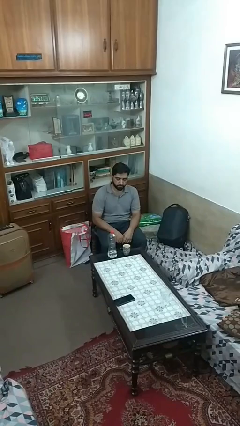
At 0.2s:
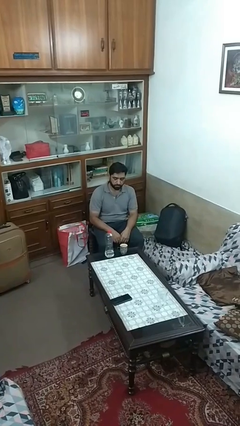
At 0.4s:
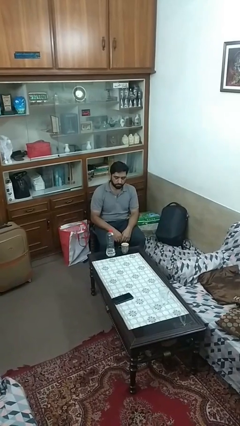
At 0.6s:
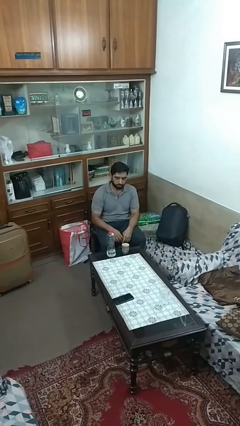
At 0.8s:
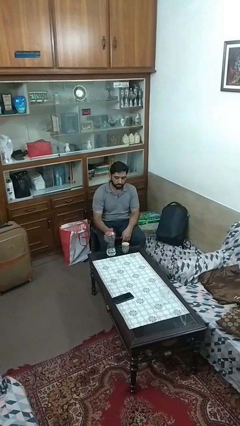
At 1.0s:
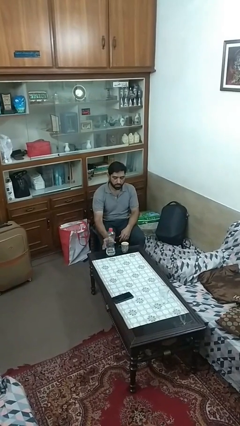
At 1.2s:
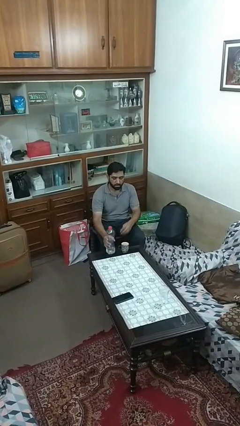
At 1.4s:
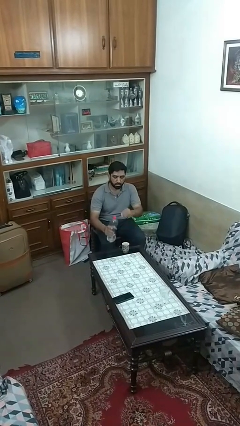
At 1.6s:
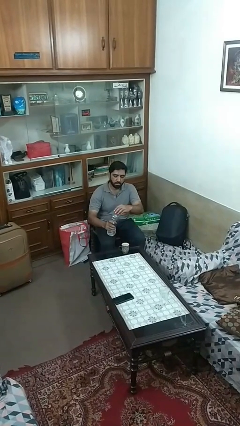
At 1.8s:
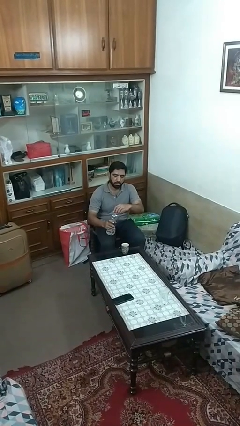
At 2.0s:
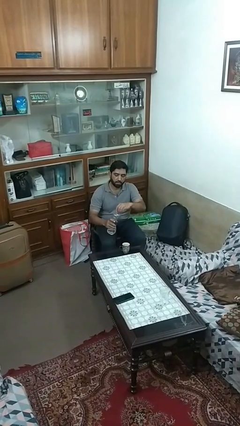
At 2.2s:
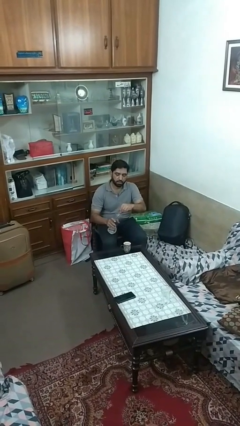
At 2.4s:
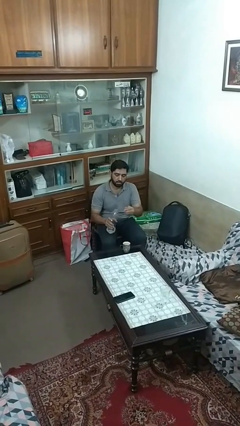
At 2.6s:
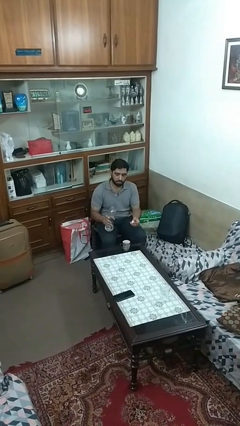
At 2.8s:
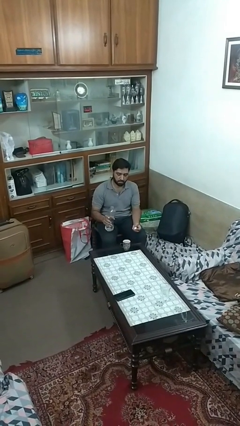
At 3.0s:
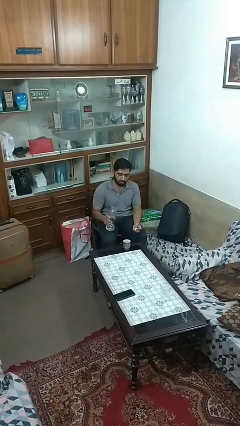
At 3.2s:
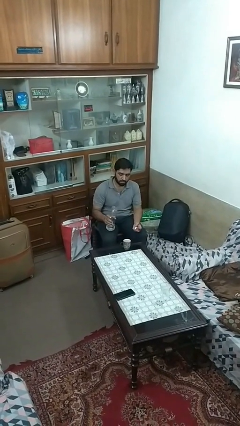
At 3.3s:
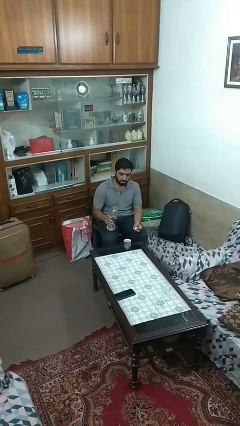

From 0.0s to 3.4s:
person unscrews lid from bottle

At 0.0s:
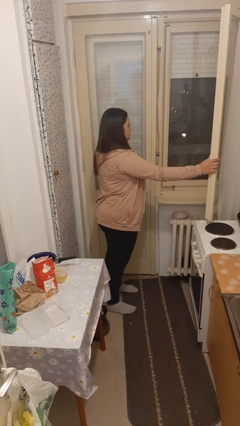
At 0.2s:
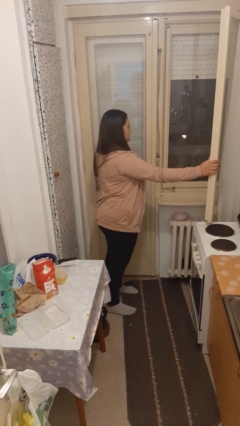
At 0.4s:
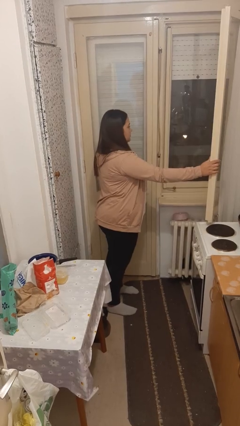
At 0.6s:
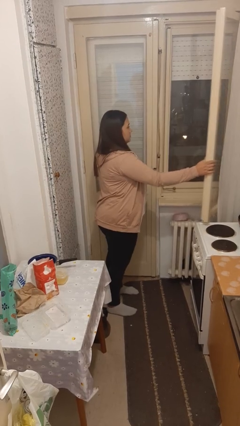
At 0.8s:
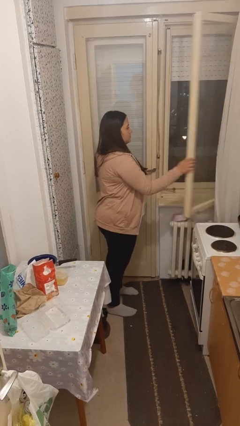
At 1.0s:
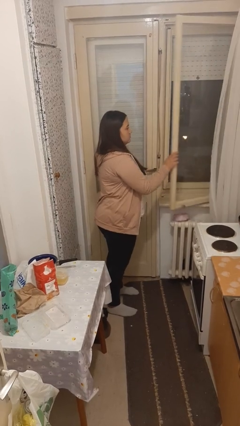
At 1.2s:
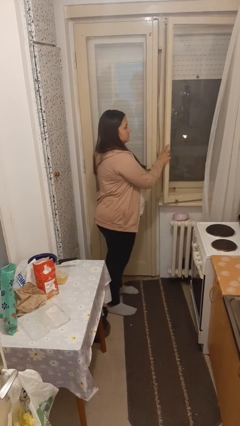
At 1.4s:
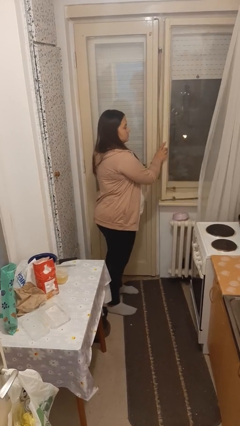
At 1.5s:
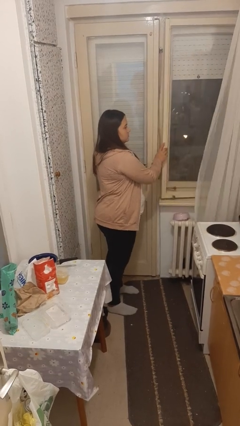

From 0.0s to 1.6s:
person closes home window

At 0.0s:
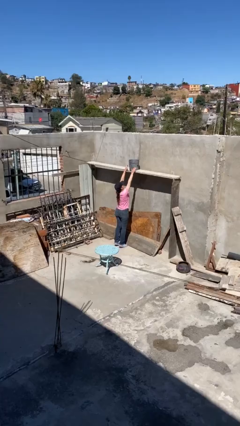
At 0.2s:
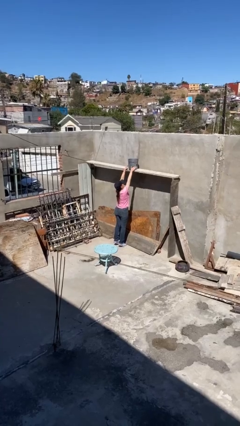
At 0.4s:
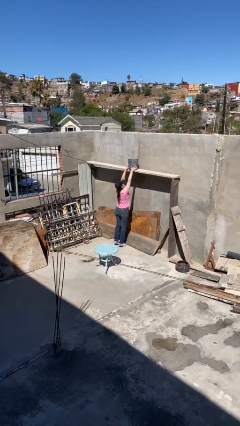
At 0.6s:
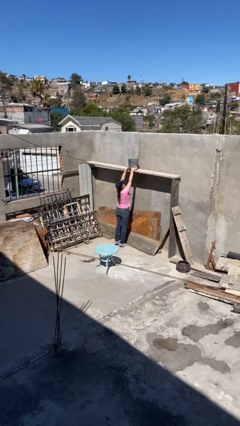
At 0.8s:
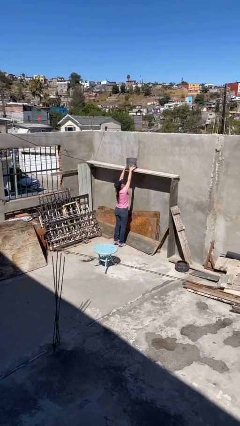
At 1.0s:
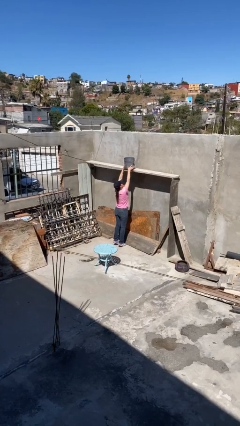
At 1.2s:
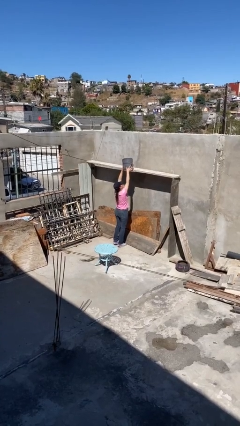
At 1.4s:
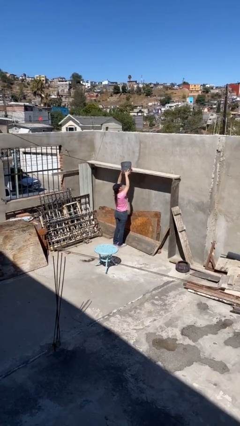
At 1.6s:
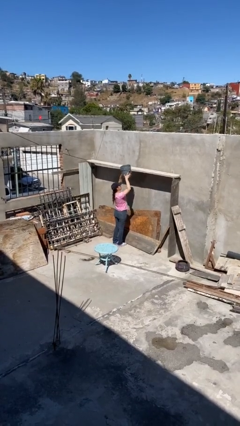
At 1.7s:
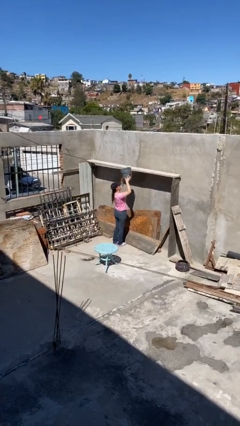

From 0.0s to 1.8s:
person picks up object from shelf

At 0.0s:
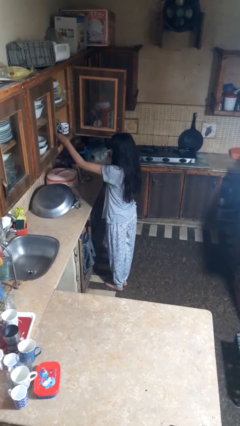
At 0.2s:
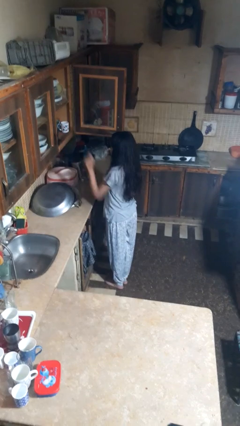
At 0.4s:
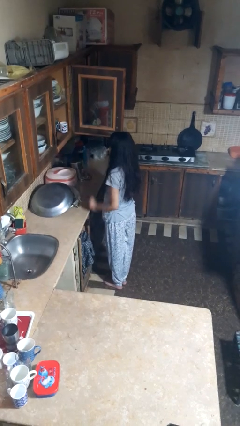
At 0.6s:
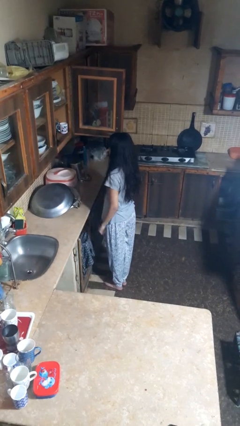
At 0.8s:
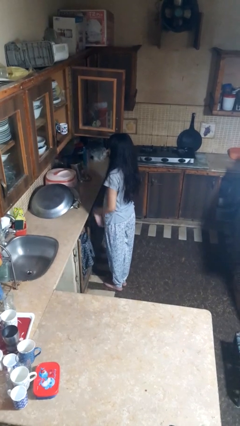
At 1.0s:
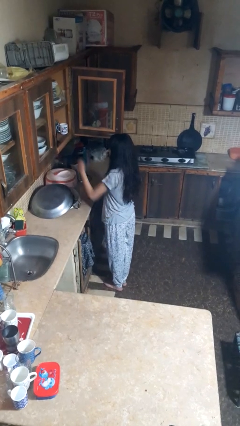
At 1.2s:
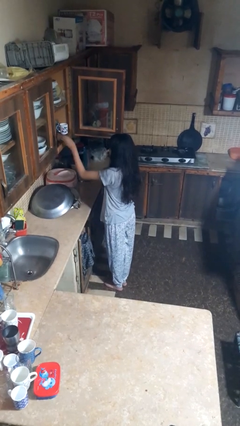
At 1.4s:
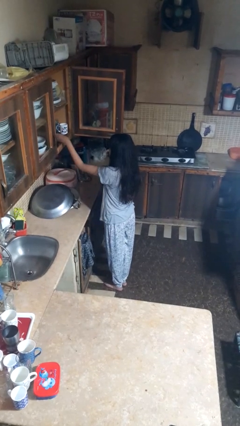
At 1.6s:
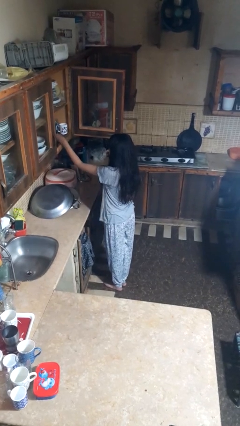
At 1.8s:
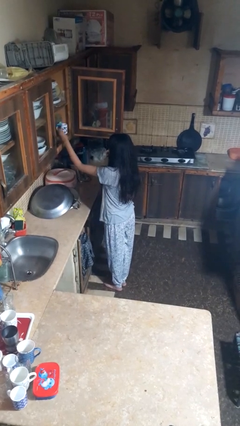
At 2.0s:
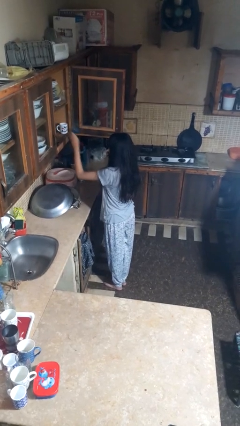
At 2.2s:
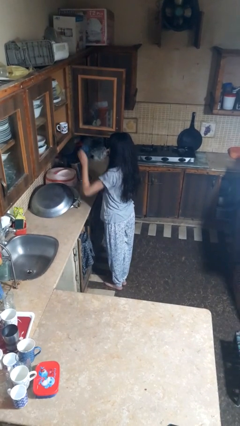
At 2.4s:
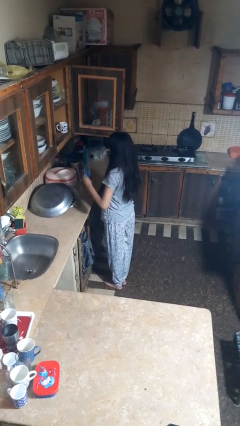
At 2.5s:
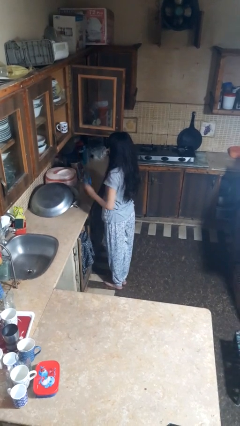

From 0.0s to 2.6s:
person takes object from cabinet

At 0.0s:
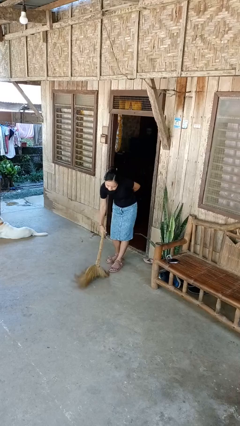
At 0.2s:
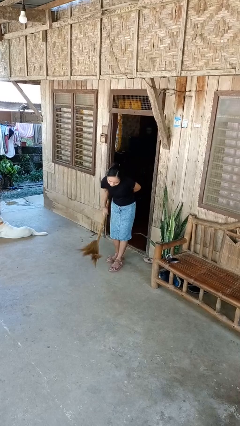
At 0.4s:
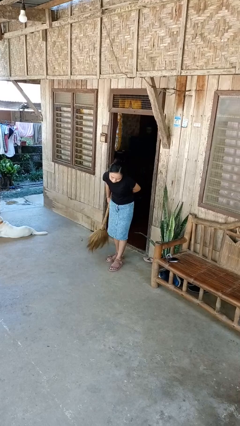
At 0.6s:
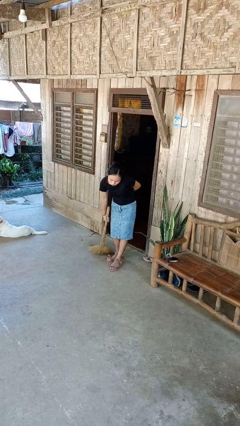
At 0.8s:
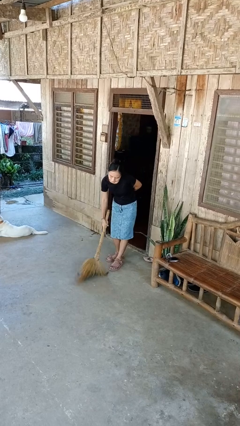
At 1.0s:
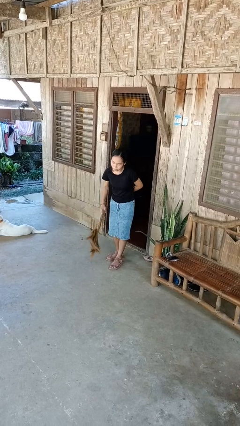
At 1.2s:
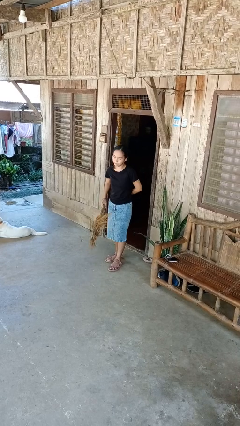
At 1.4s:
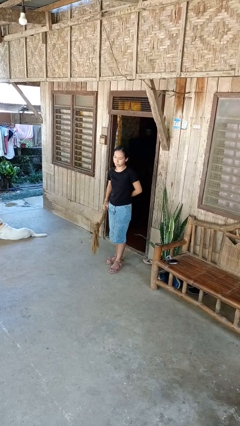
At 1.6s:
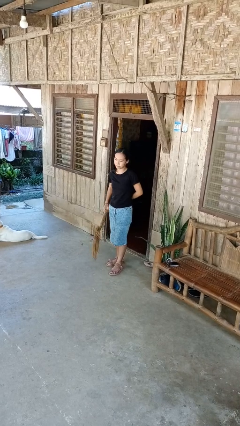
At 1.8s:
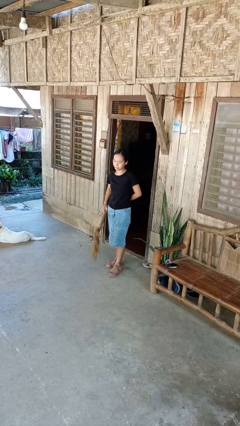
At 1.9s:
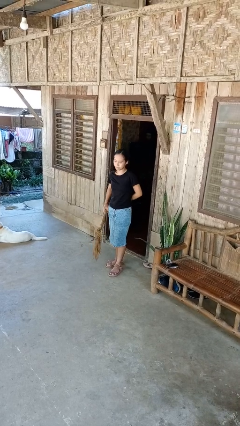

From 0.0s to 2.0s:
person sweeps floor

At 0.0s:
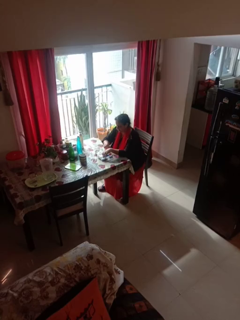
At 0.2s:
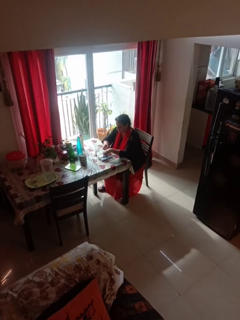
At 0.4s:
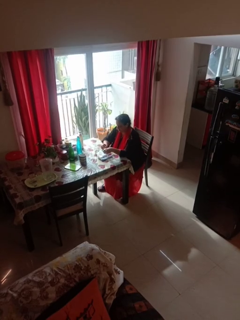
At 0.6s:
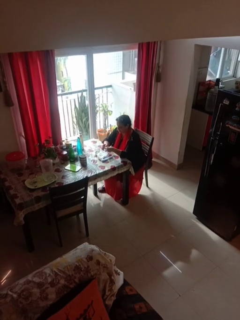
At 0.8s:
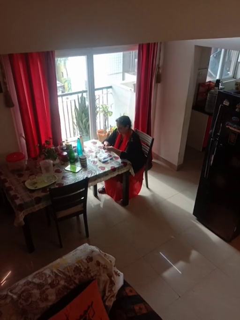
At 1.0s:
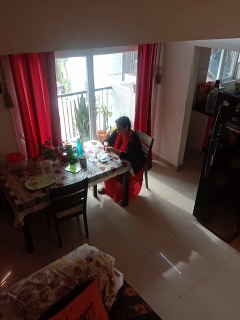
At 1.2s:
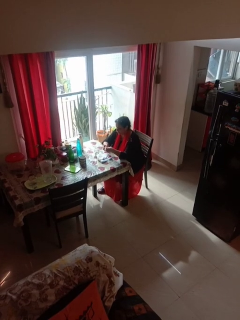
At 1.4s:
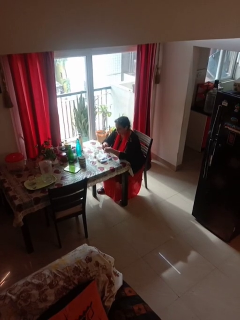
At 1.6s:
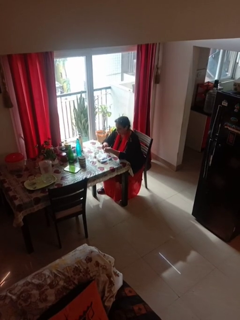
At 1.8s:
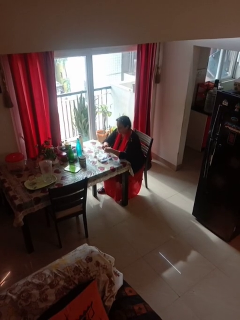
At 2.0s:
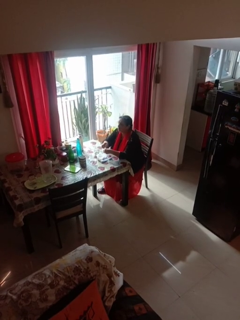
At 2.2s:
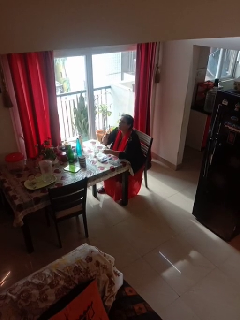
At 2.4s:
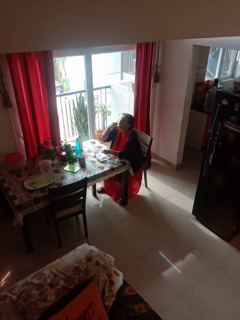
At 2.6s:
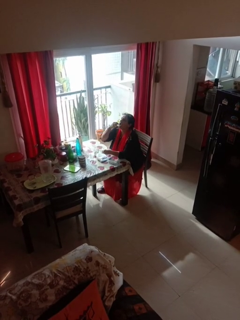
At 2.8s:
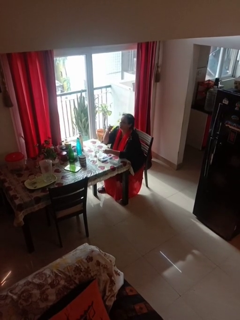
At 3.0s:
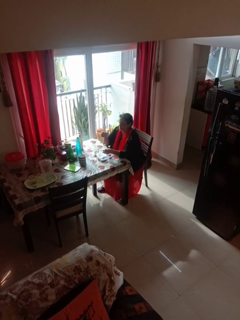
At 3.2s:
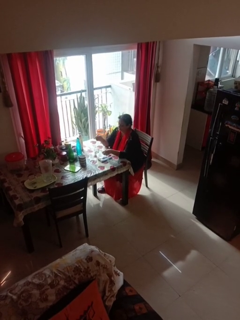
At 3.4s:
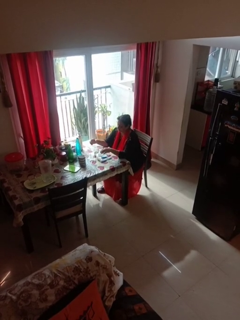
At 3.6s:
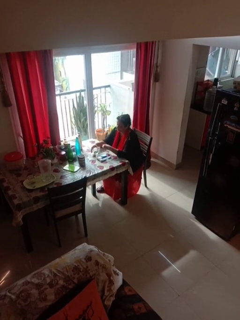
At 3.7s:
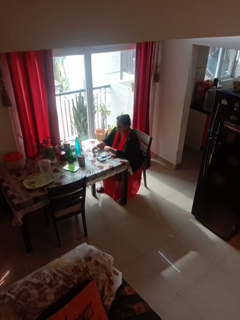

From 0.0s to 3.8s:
person takes medicine pills

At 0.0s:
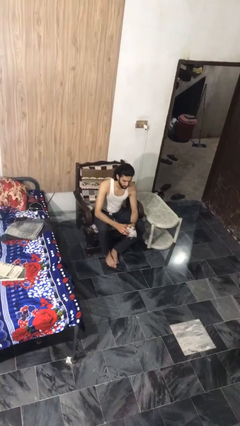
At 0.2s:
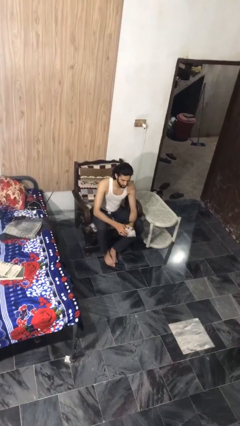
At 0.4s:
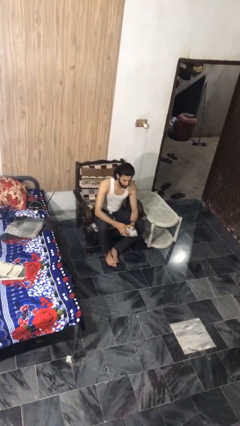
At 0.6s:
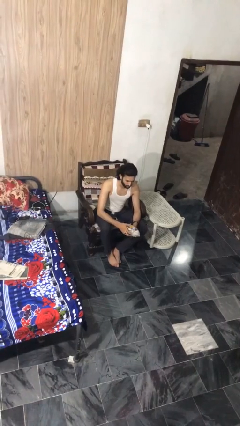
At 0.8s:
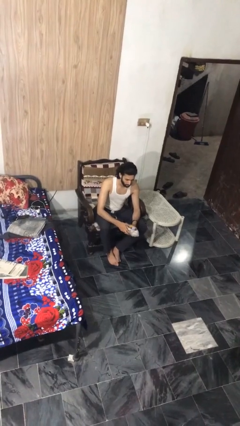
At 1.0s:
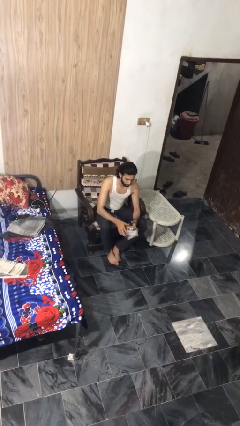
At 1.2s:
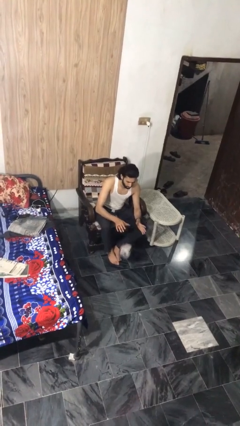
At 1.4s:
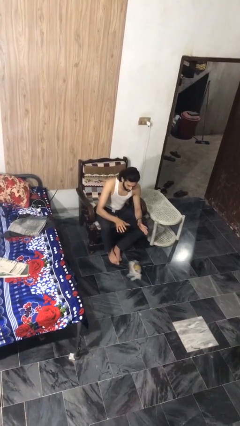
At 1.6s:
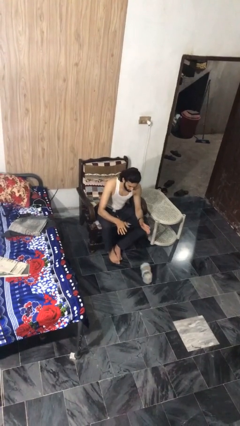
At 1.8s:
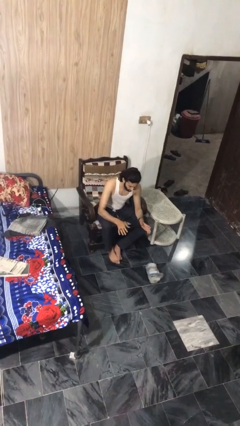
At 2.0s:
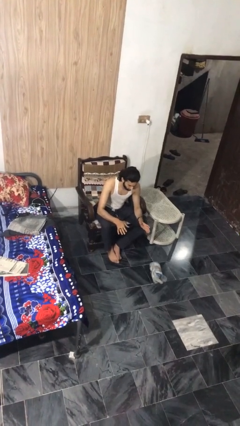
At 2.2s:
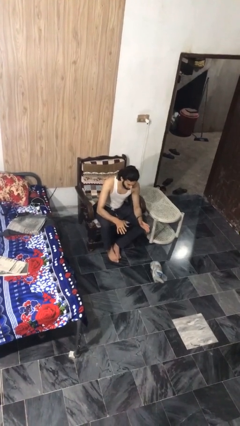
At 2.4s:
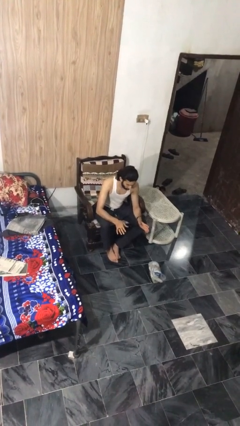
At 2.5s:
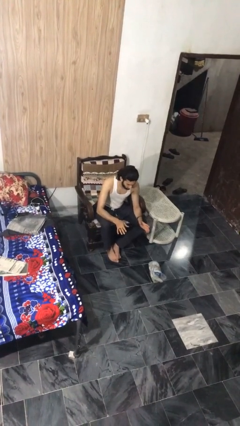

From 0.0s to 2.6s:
person drops object
